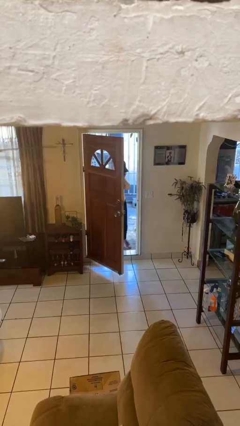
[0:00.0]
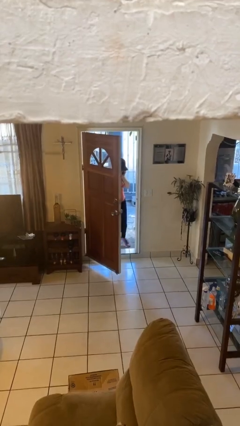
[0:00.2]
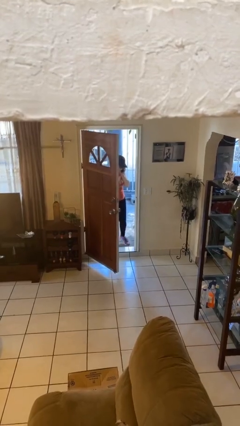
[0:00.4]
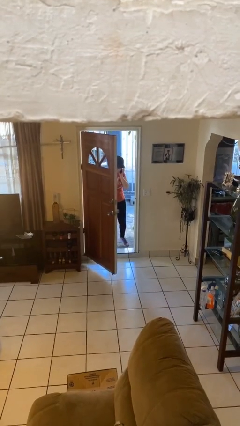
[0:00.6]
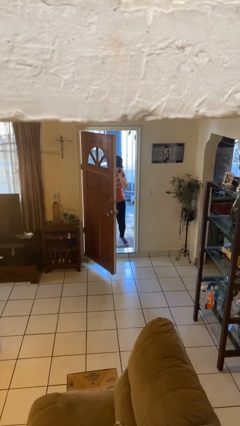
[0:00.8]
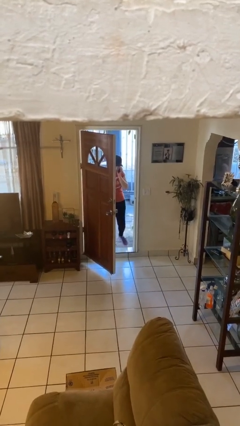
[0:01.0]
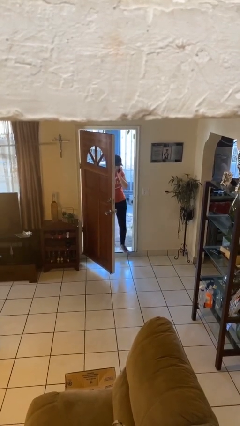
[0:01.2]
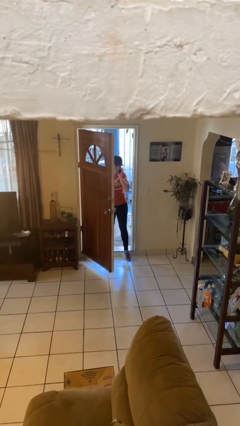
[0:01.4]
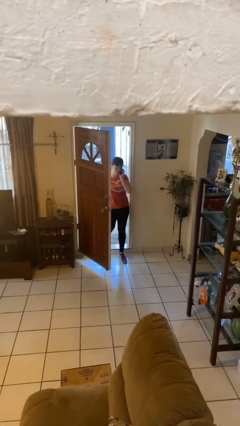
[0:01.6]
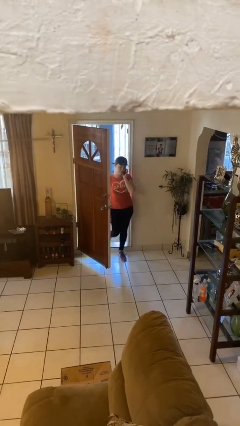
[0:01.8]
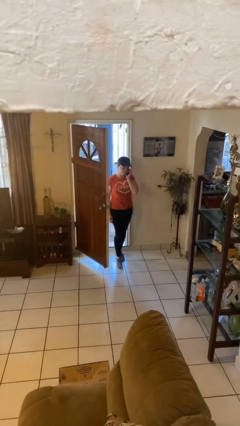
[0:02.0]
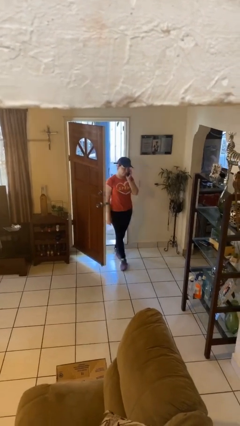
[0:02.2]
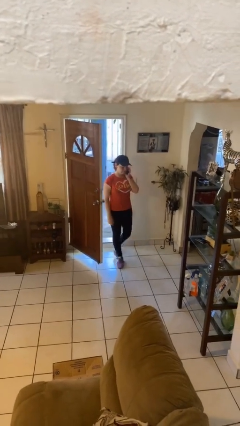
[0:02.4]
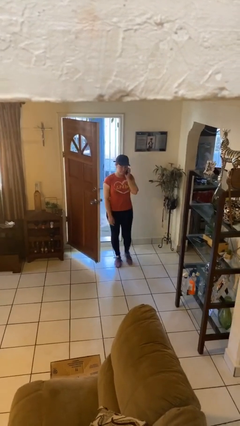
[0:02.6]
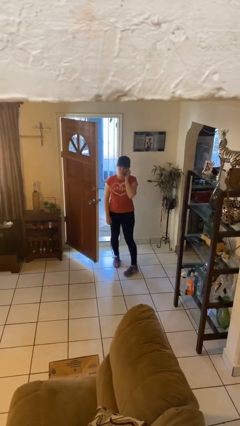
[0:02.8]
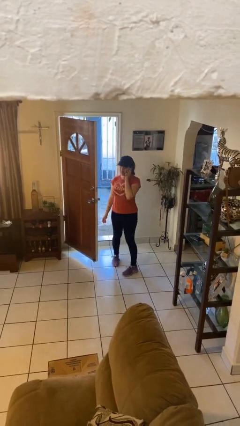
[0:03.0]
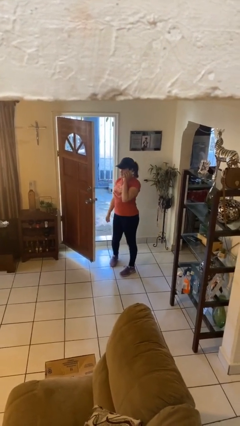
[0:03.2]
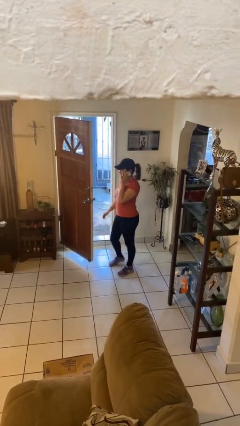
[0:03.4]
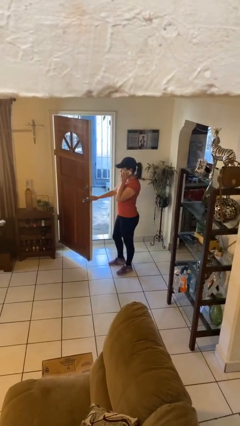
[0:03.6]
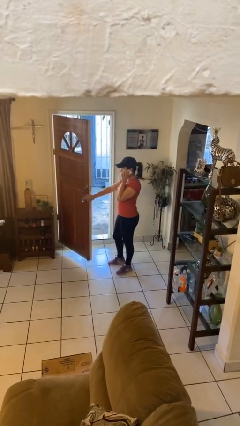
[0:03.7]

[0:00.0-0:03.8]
person enters scene through structure

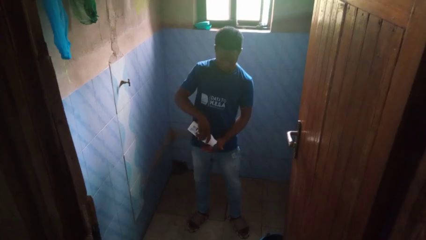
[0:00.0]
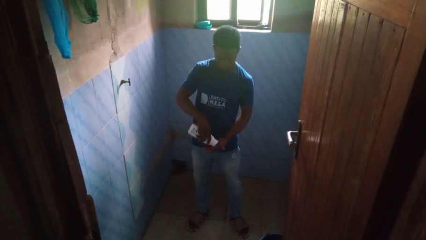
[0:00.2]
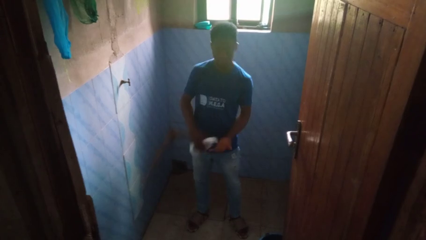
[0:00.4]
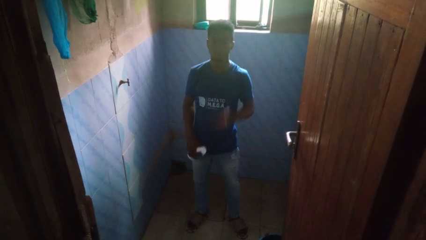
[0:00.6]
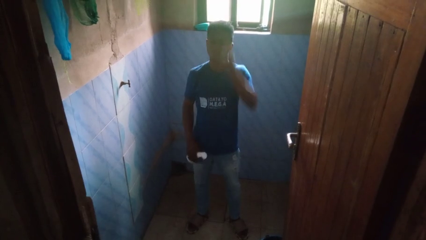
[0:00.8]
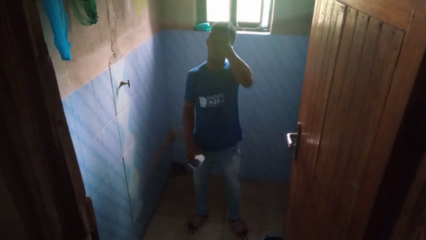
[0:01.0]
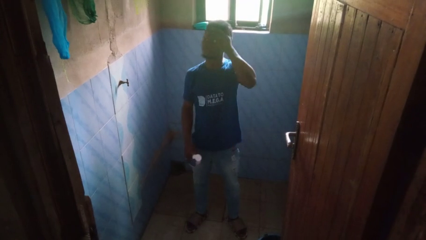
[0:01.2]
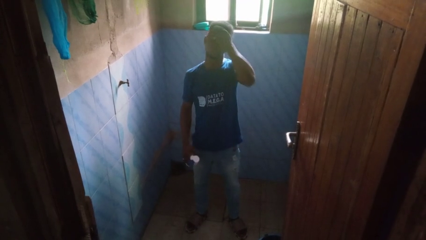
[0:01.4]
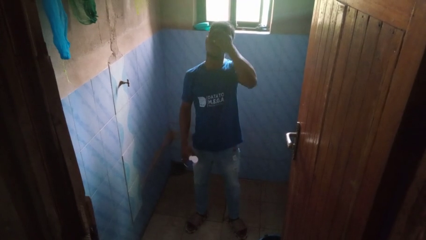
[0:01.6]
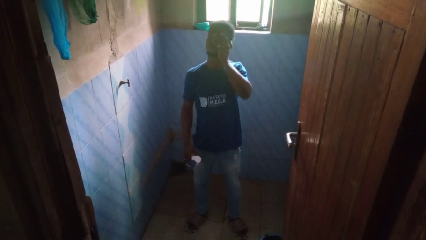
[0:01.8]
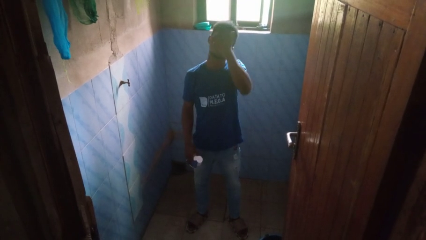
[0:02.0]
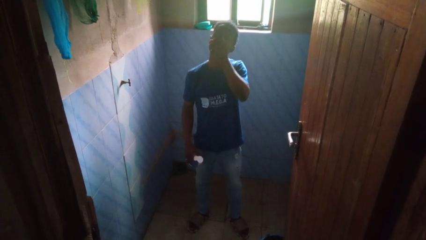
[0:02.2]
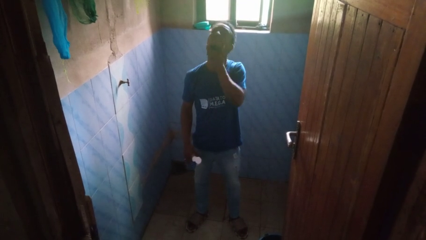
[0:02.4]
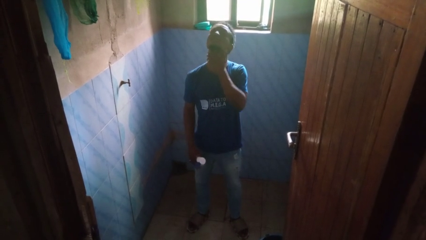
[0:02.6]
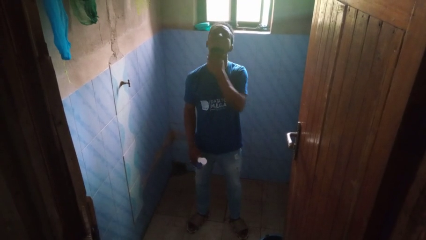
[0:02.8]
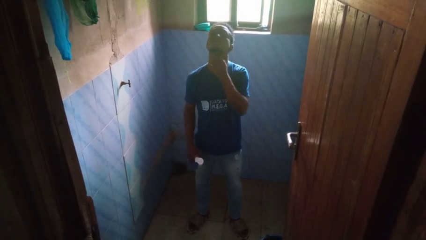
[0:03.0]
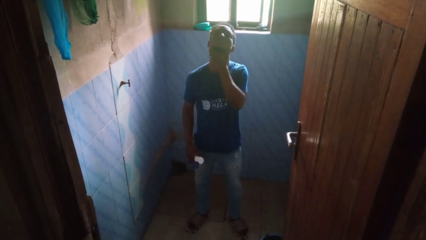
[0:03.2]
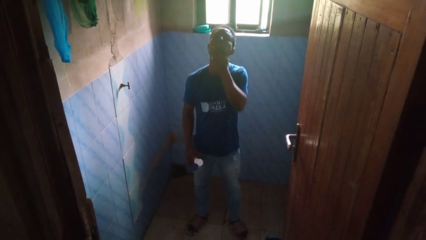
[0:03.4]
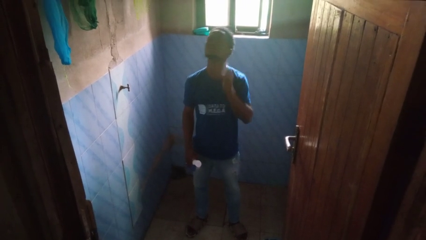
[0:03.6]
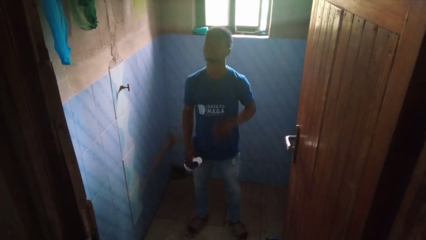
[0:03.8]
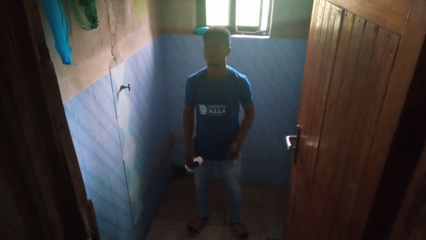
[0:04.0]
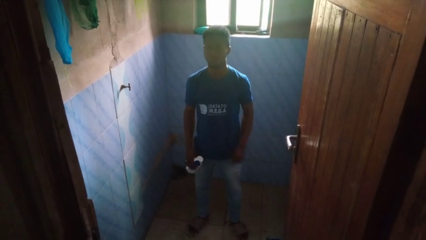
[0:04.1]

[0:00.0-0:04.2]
person applies facial moisturizer

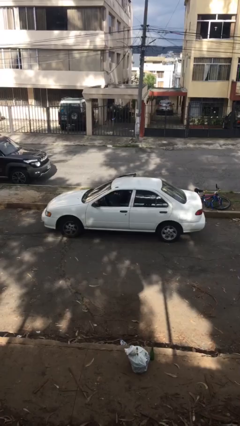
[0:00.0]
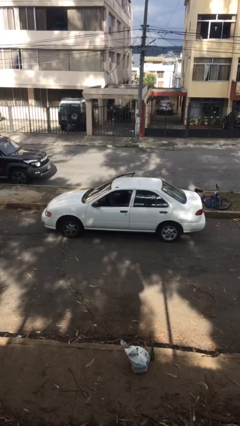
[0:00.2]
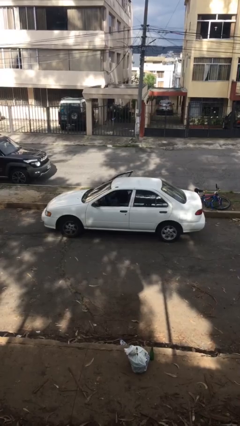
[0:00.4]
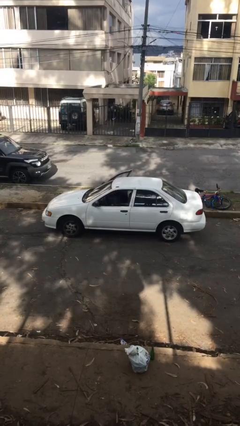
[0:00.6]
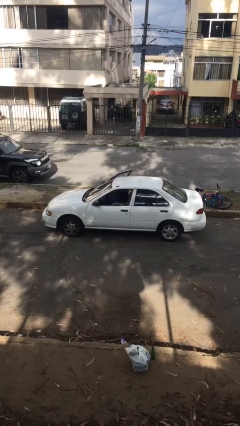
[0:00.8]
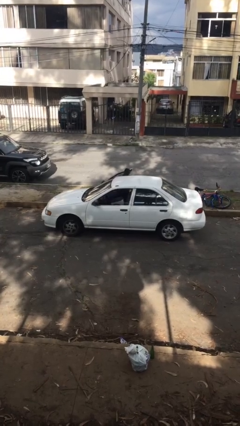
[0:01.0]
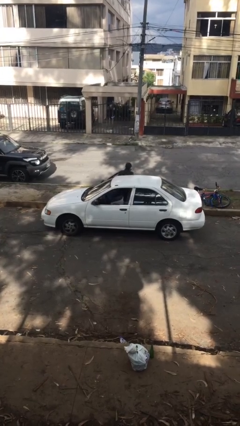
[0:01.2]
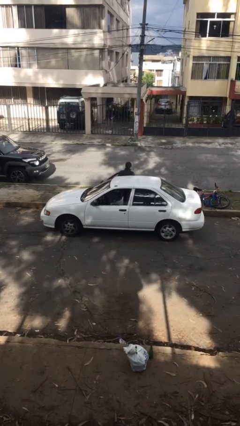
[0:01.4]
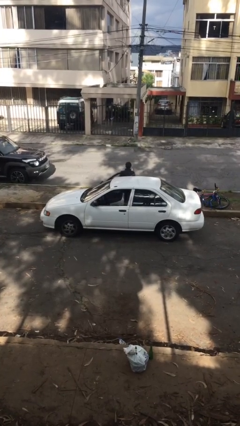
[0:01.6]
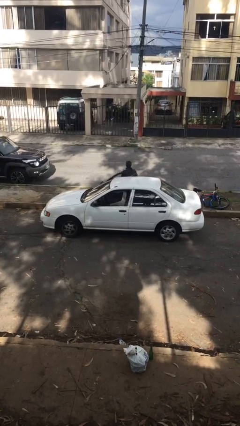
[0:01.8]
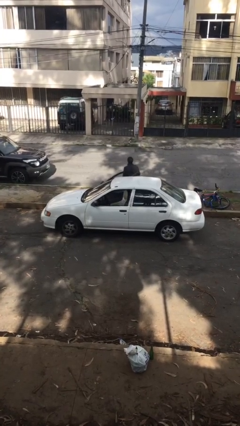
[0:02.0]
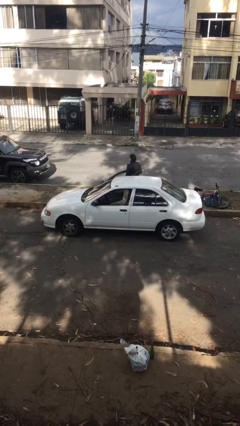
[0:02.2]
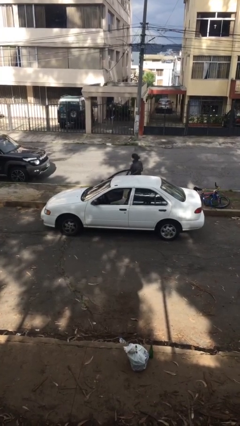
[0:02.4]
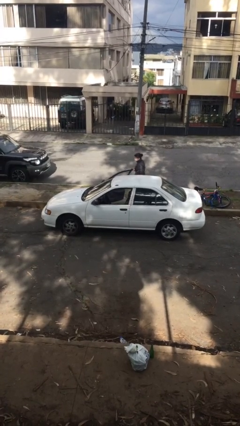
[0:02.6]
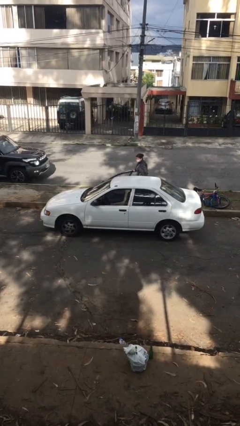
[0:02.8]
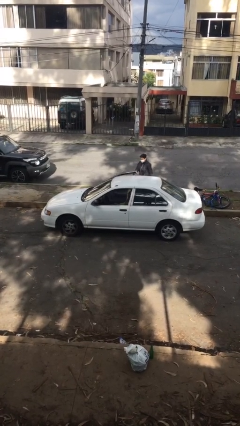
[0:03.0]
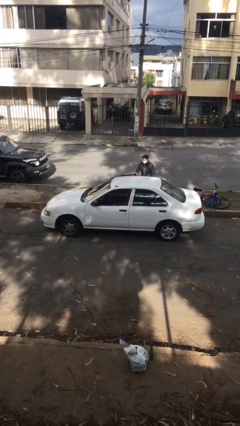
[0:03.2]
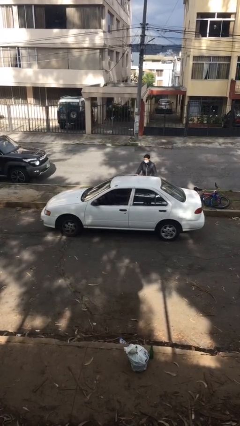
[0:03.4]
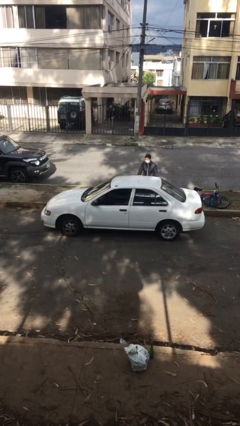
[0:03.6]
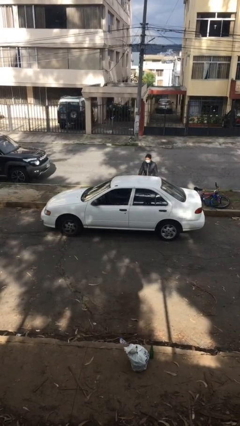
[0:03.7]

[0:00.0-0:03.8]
car drops off person

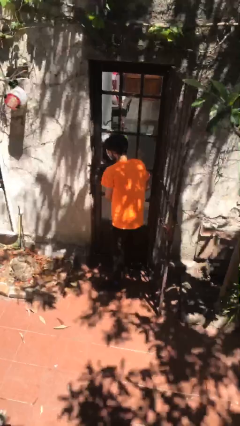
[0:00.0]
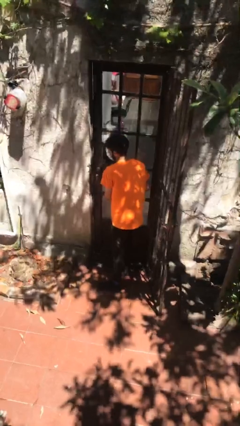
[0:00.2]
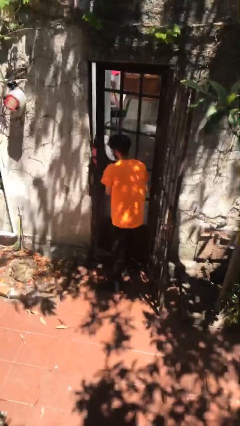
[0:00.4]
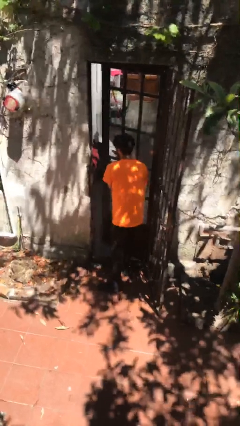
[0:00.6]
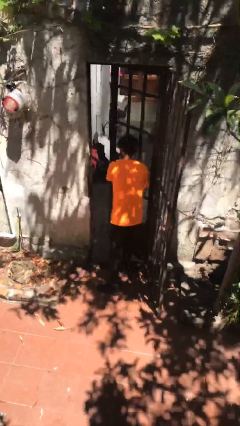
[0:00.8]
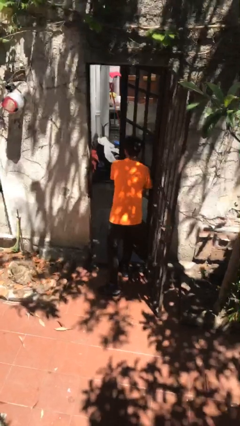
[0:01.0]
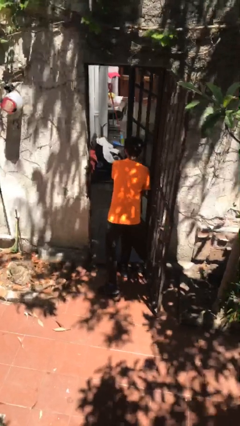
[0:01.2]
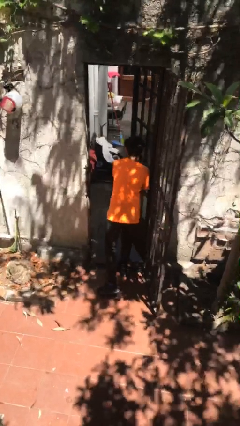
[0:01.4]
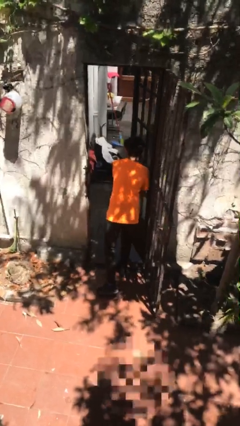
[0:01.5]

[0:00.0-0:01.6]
person opens facility door

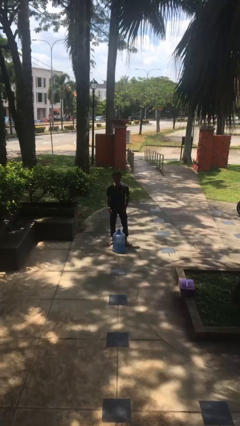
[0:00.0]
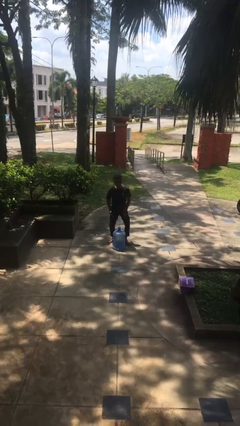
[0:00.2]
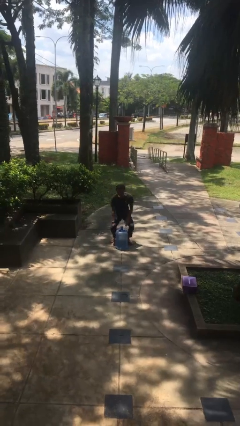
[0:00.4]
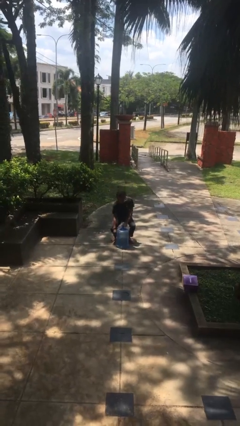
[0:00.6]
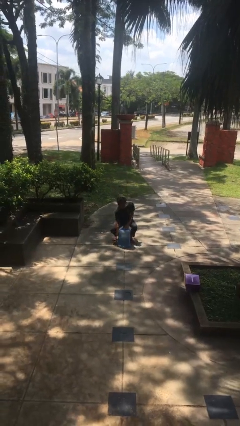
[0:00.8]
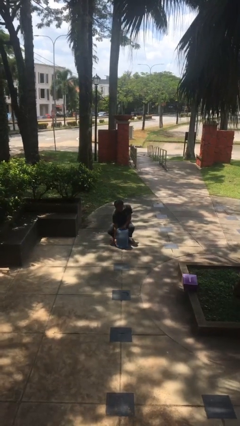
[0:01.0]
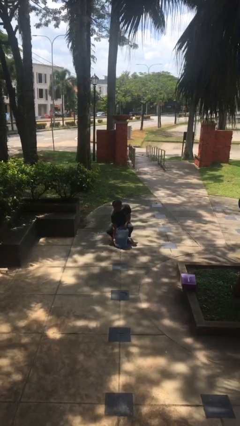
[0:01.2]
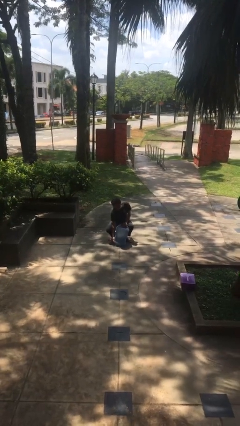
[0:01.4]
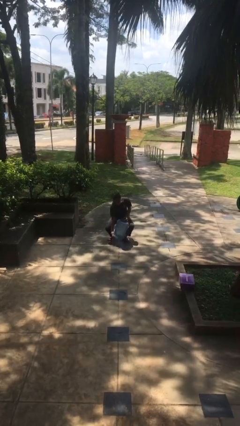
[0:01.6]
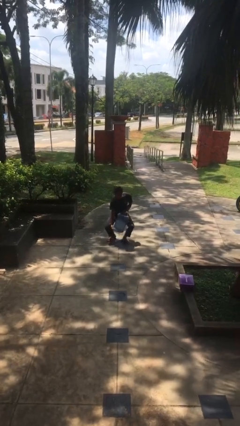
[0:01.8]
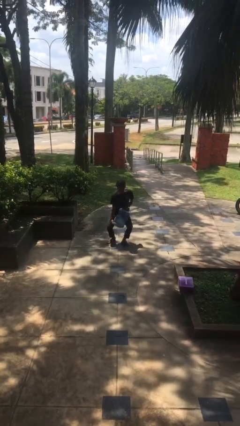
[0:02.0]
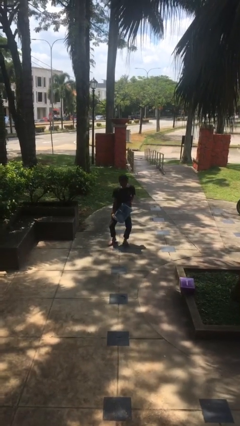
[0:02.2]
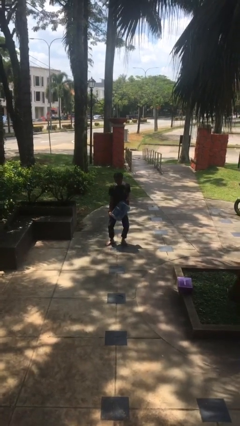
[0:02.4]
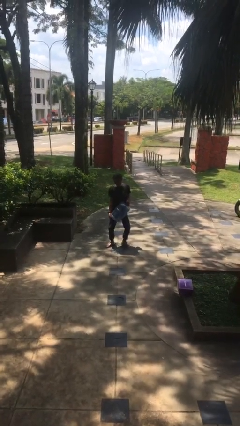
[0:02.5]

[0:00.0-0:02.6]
person picks up object from floor

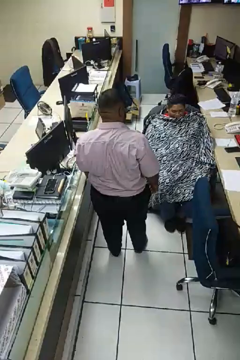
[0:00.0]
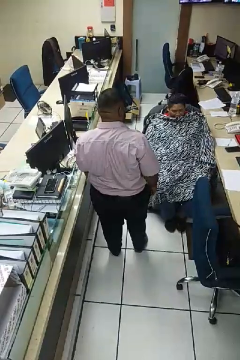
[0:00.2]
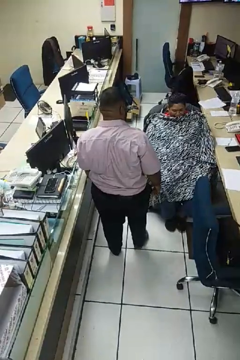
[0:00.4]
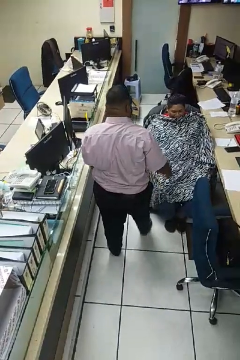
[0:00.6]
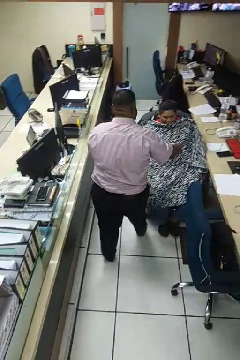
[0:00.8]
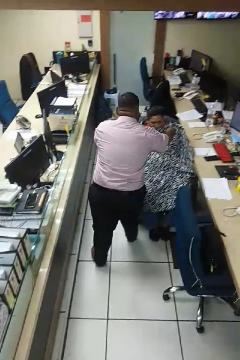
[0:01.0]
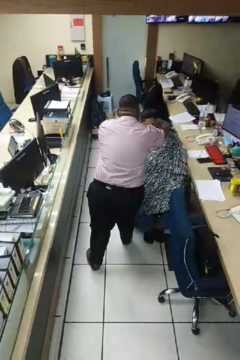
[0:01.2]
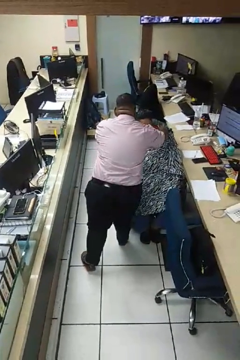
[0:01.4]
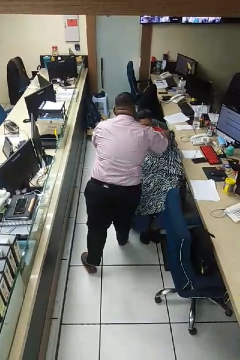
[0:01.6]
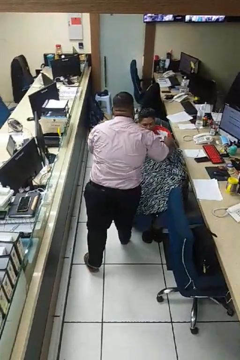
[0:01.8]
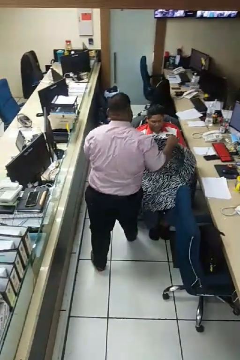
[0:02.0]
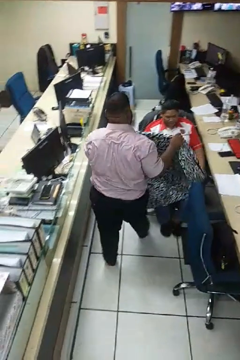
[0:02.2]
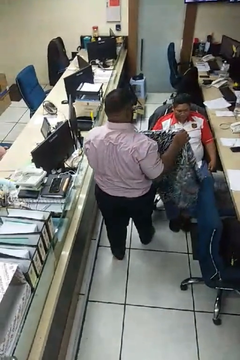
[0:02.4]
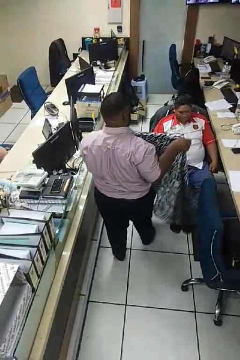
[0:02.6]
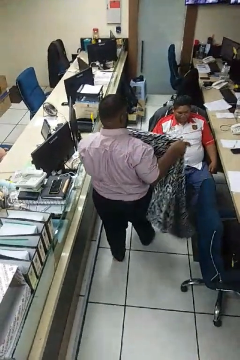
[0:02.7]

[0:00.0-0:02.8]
person uncovers friend with blanket
